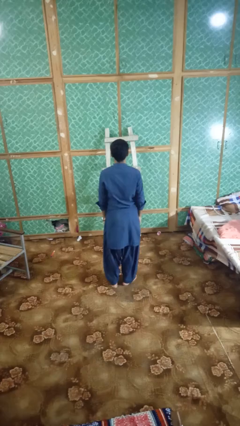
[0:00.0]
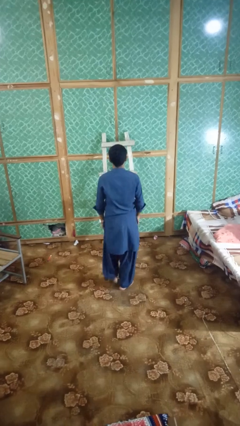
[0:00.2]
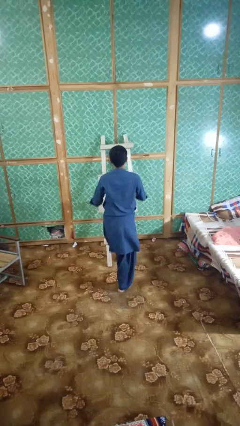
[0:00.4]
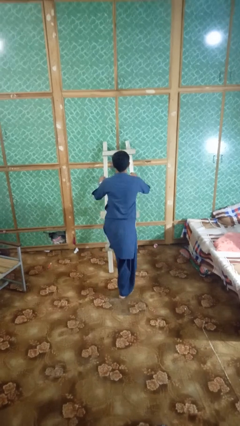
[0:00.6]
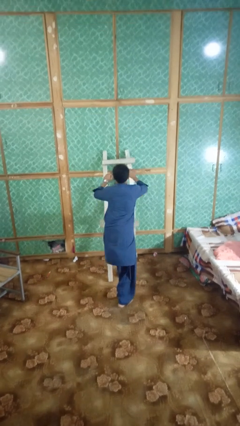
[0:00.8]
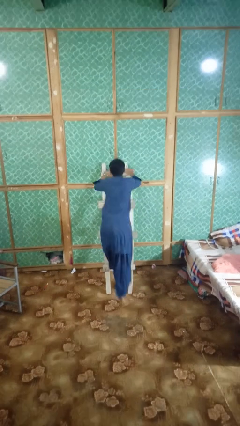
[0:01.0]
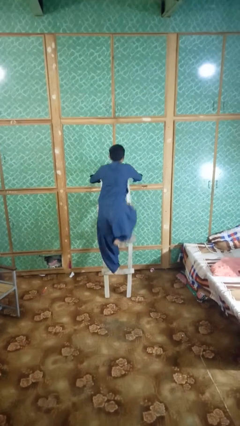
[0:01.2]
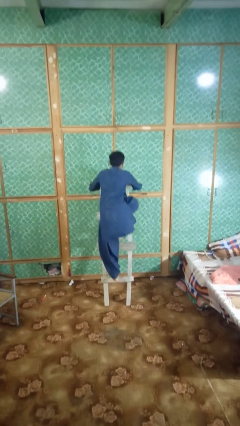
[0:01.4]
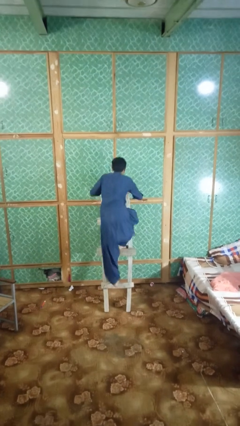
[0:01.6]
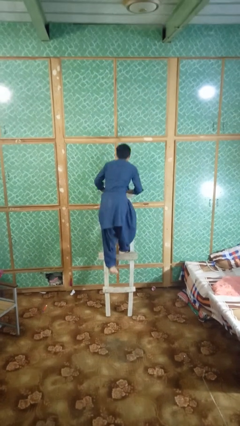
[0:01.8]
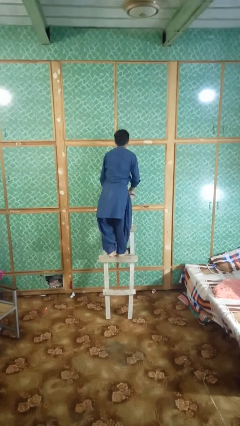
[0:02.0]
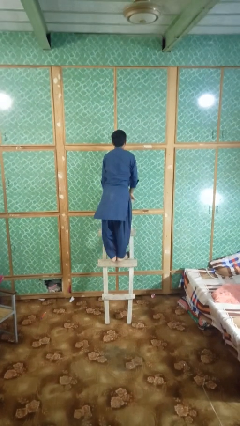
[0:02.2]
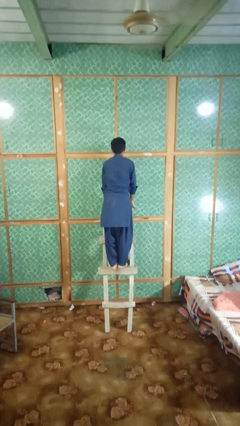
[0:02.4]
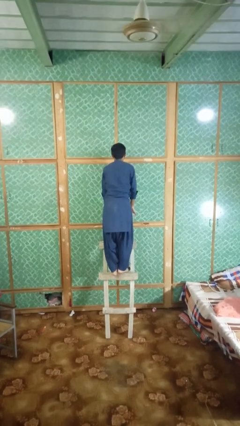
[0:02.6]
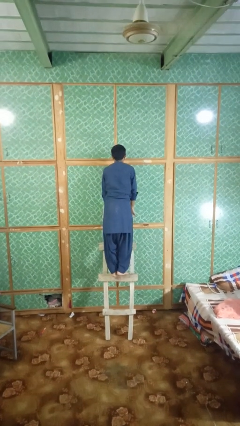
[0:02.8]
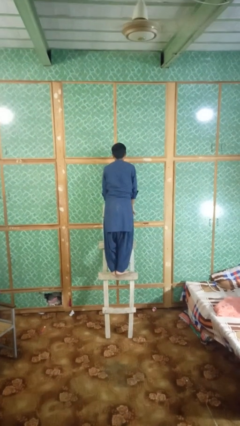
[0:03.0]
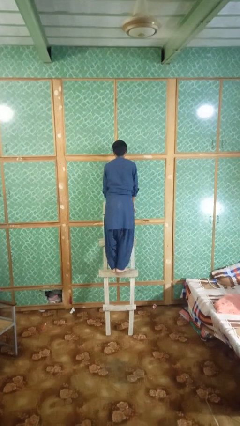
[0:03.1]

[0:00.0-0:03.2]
person climbs up ladder

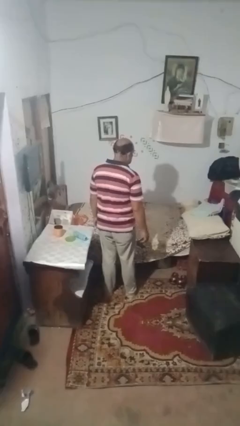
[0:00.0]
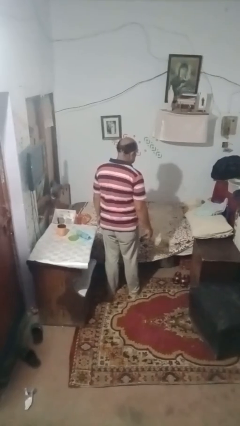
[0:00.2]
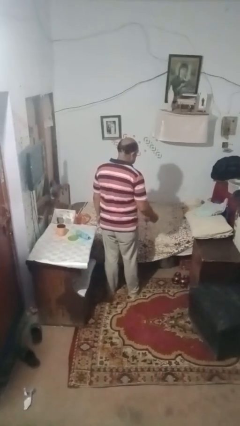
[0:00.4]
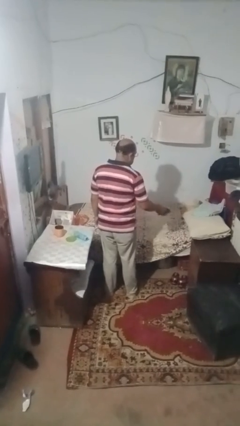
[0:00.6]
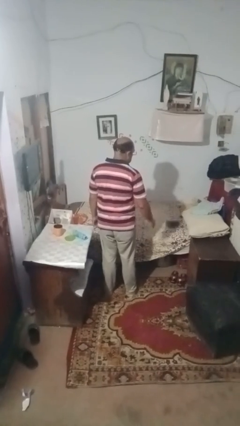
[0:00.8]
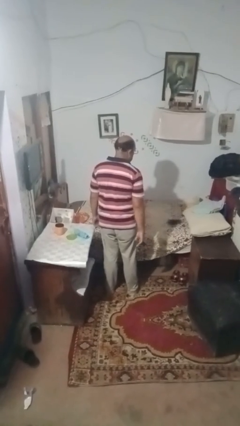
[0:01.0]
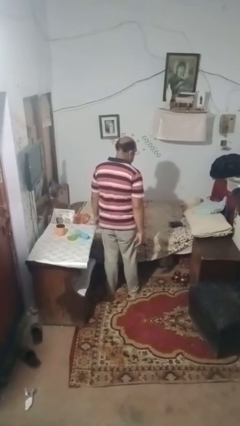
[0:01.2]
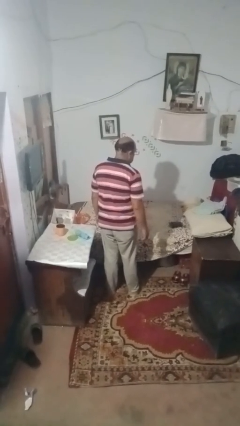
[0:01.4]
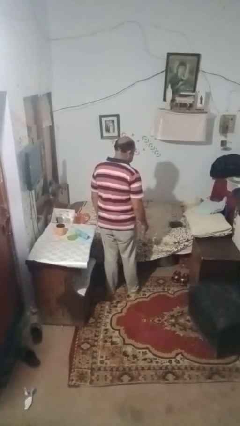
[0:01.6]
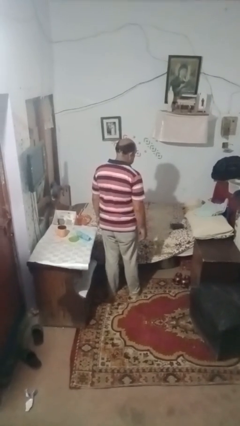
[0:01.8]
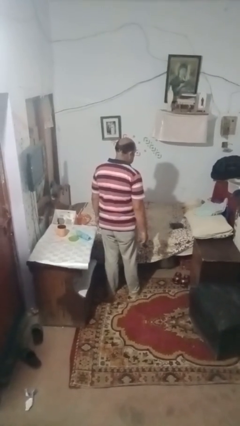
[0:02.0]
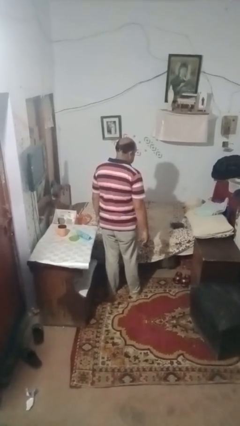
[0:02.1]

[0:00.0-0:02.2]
person throws object on bed

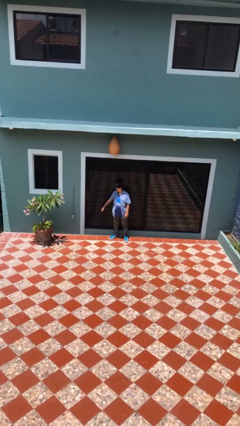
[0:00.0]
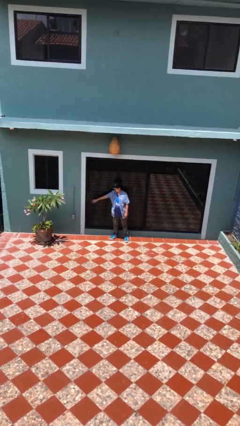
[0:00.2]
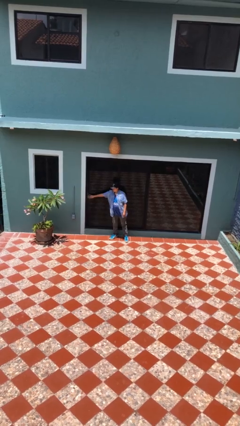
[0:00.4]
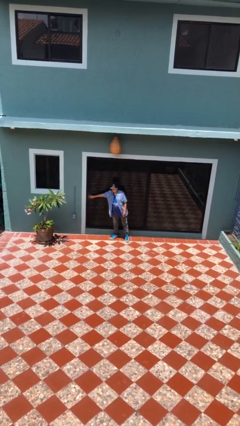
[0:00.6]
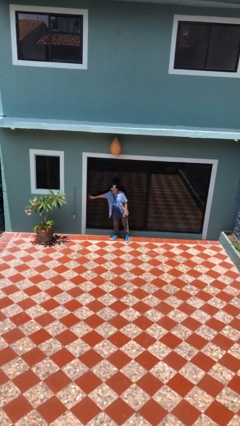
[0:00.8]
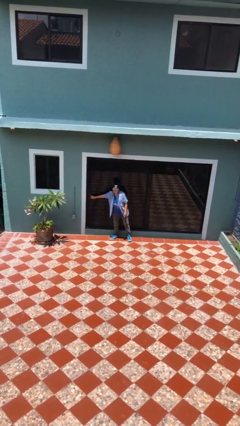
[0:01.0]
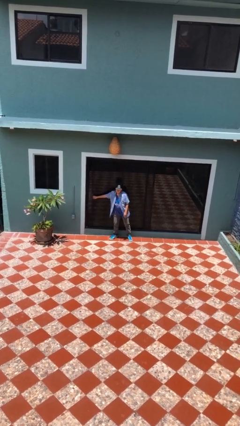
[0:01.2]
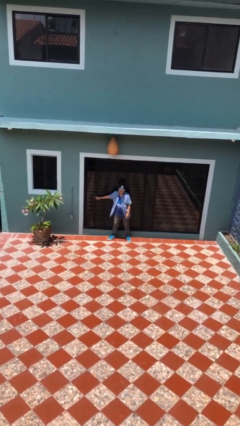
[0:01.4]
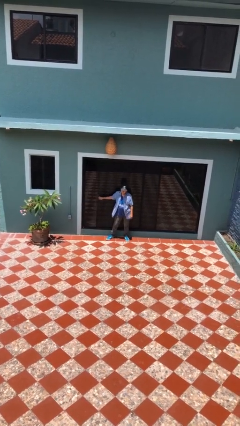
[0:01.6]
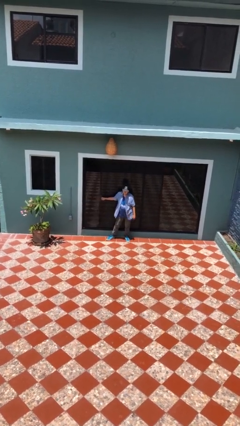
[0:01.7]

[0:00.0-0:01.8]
person opens sliding door

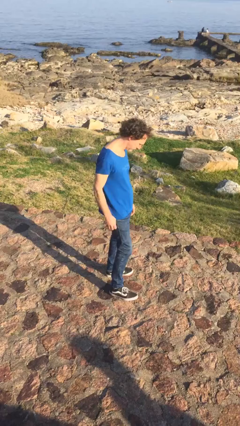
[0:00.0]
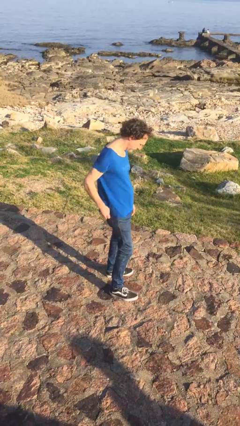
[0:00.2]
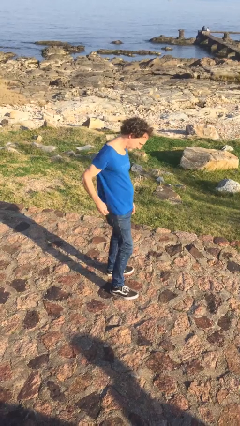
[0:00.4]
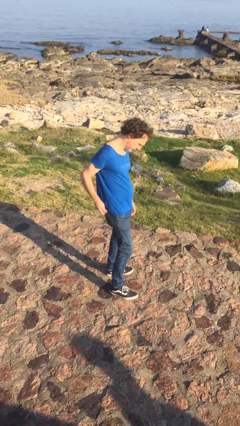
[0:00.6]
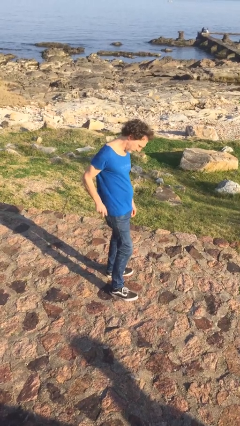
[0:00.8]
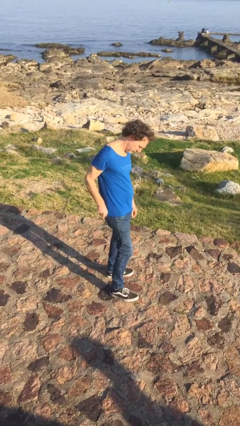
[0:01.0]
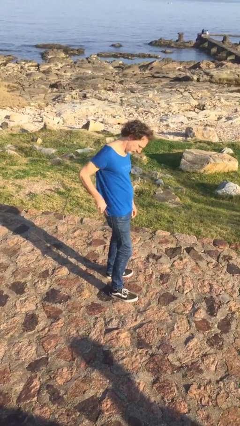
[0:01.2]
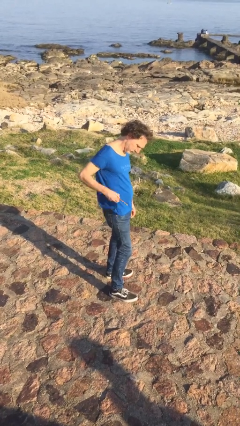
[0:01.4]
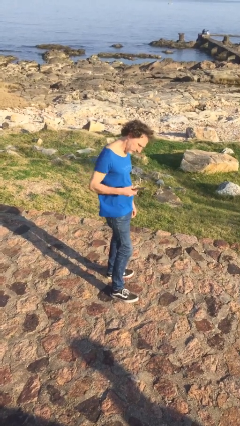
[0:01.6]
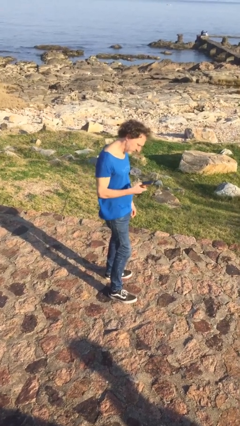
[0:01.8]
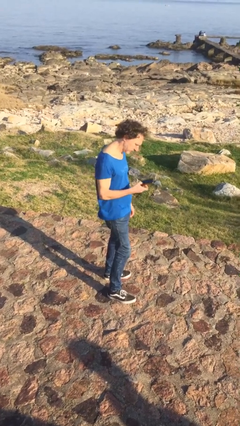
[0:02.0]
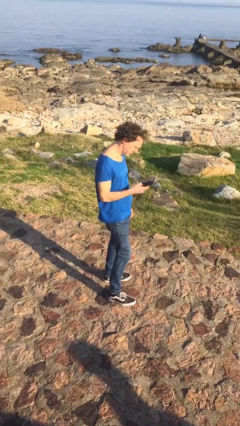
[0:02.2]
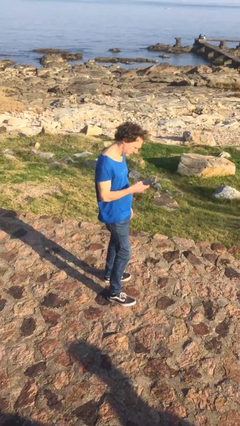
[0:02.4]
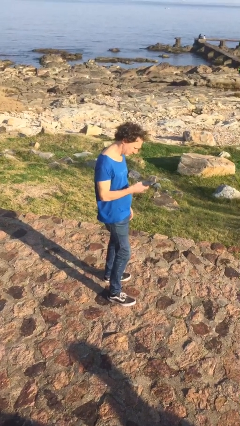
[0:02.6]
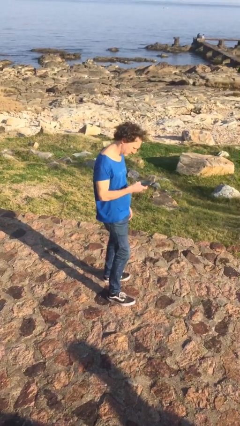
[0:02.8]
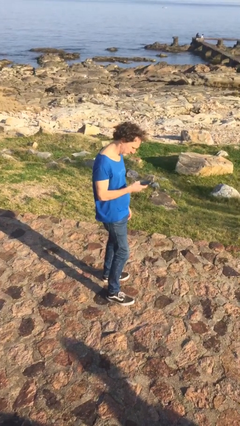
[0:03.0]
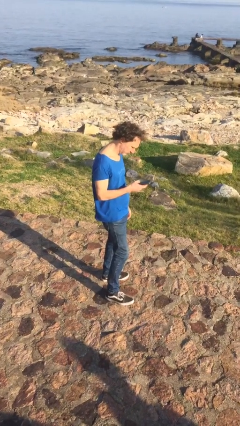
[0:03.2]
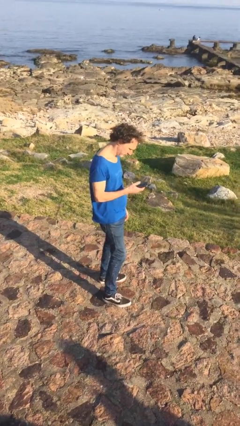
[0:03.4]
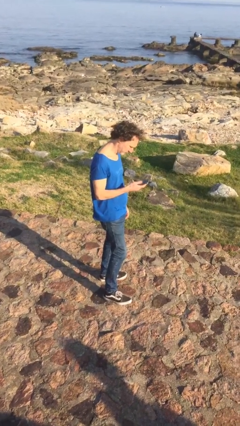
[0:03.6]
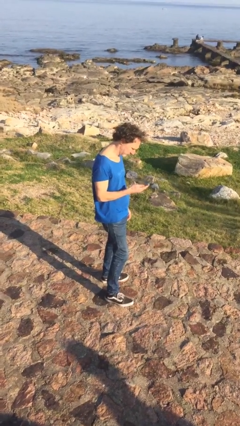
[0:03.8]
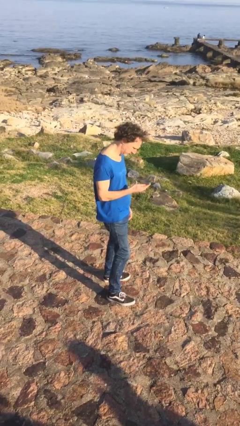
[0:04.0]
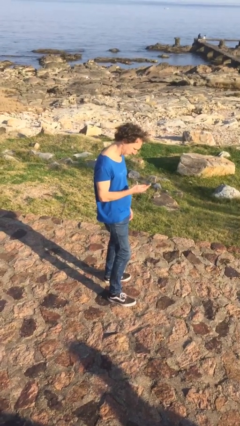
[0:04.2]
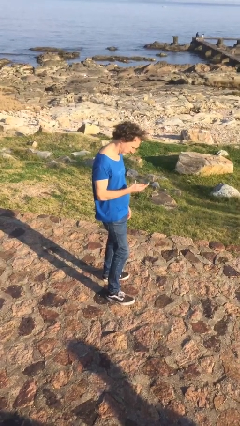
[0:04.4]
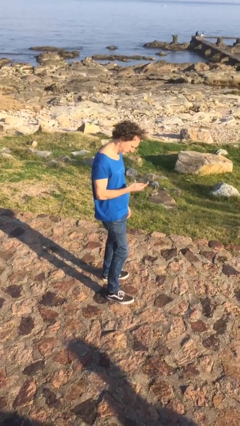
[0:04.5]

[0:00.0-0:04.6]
person takes phone from pocket

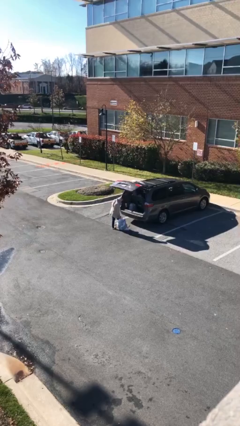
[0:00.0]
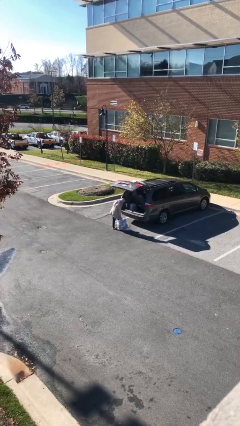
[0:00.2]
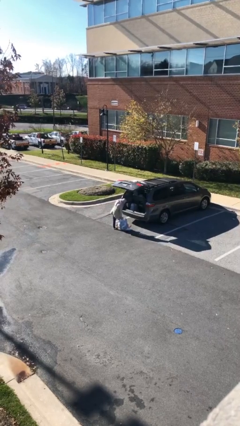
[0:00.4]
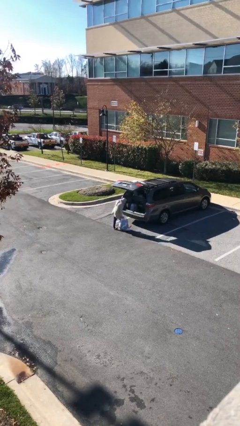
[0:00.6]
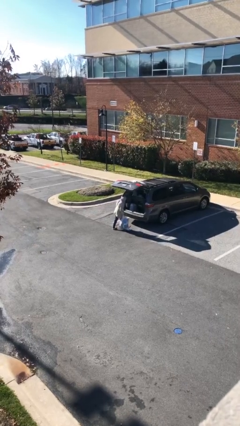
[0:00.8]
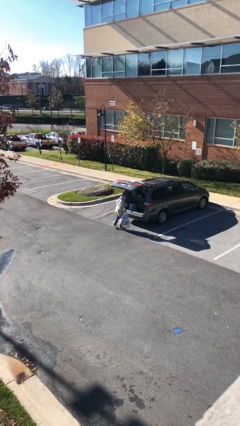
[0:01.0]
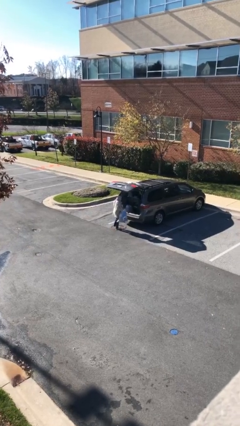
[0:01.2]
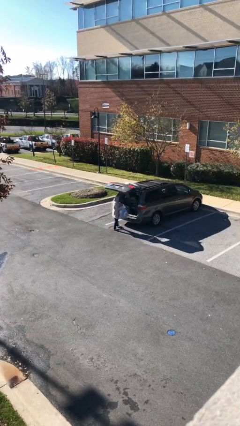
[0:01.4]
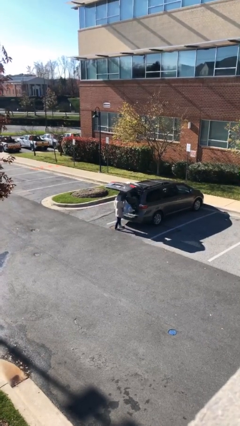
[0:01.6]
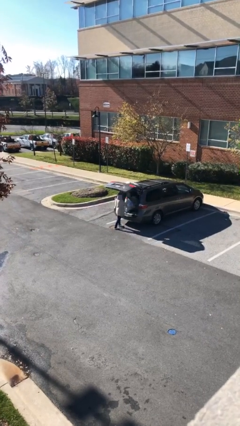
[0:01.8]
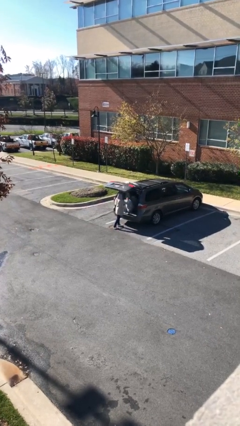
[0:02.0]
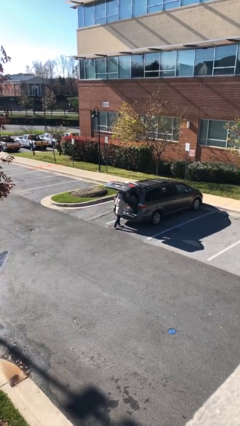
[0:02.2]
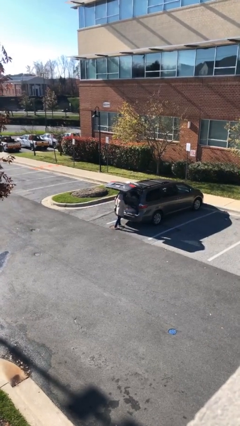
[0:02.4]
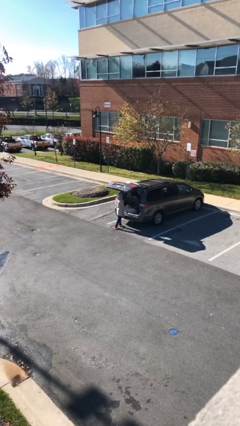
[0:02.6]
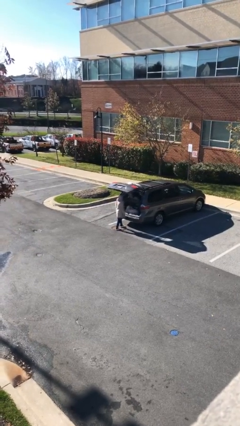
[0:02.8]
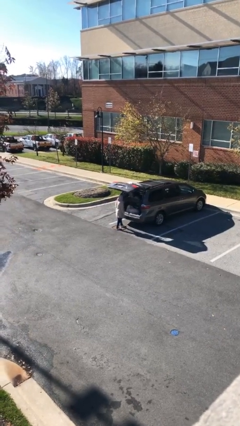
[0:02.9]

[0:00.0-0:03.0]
person loads car

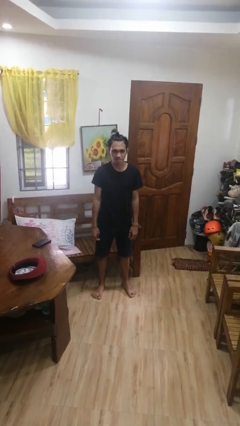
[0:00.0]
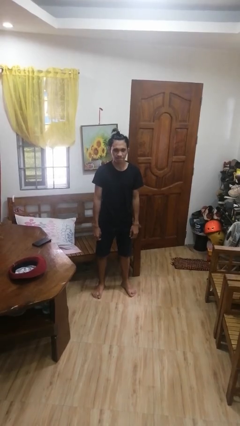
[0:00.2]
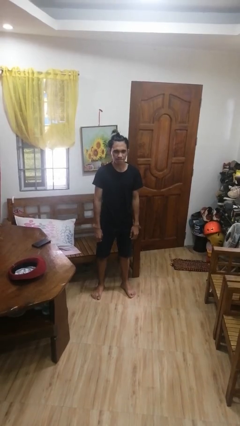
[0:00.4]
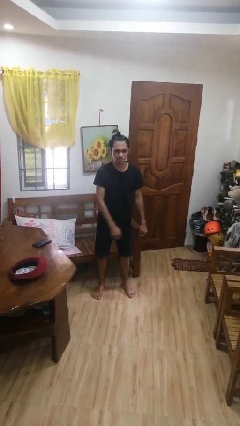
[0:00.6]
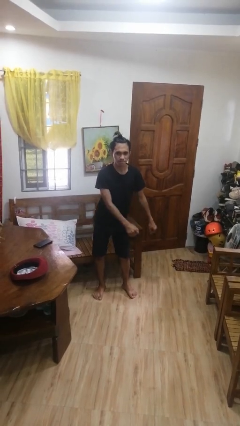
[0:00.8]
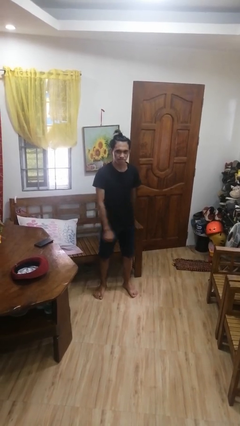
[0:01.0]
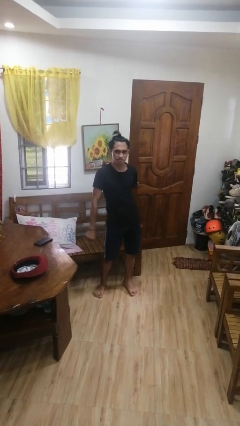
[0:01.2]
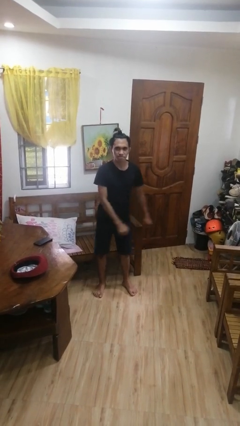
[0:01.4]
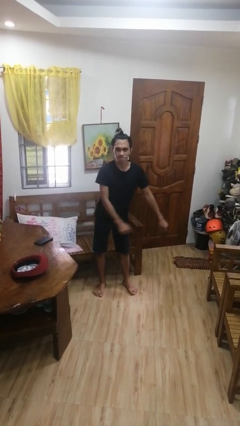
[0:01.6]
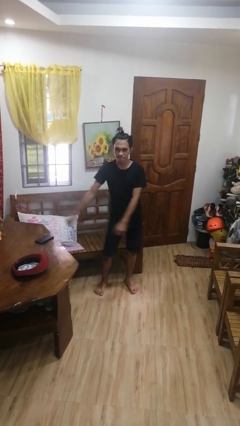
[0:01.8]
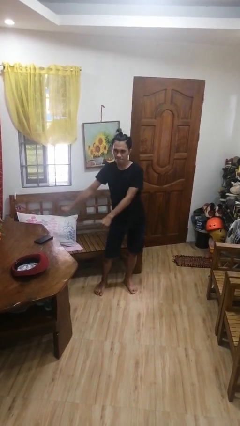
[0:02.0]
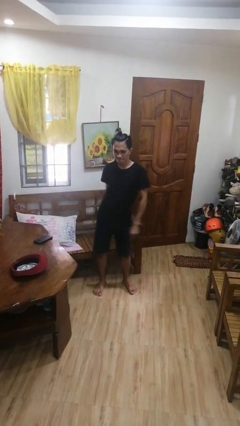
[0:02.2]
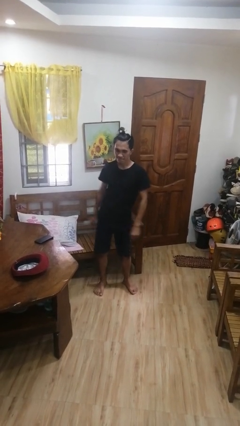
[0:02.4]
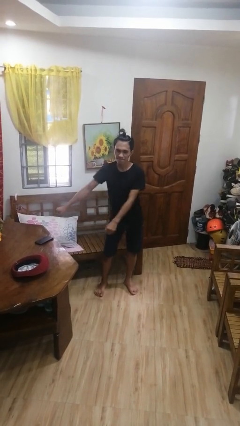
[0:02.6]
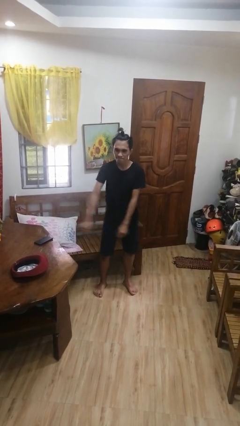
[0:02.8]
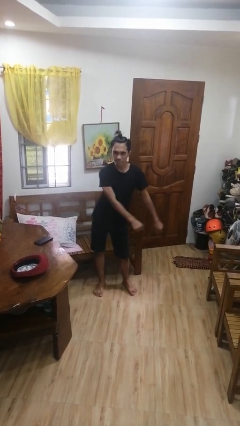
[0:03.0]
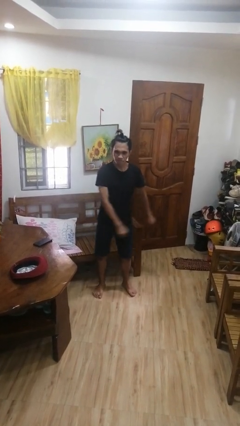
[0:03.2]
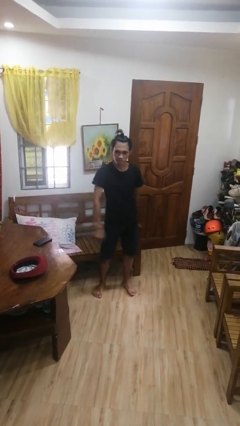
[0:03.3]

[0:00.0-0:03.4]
person dances in place
